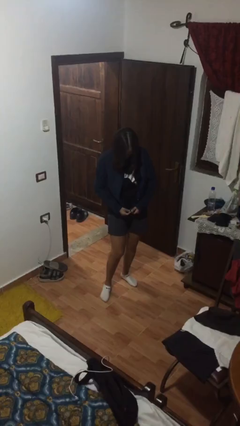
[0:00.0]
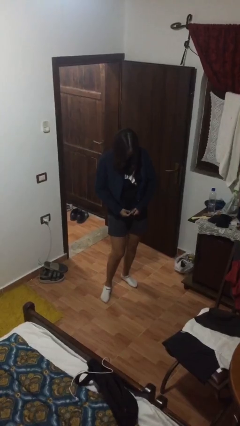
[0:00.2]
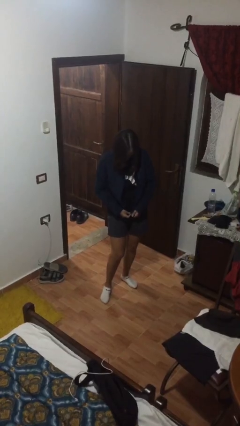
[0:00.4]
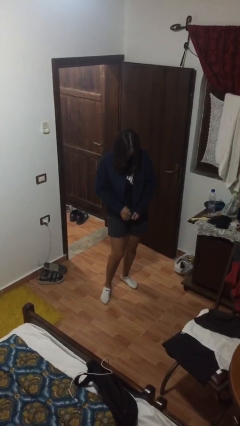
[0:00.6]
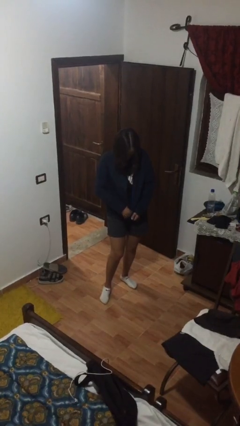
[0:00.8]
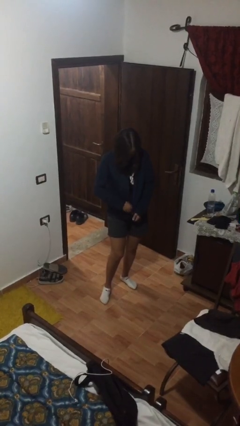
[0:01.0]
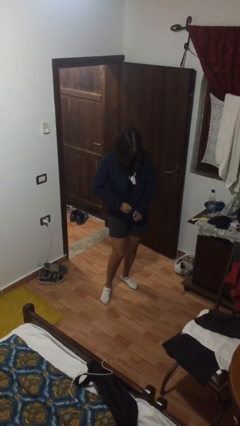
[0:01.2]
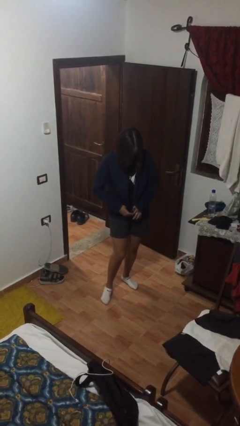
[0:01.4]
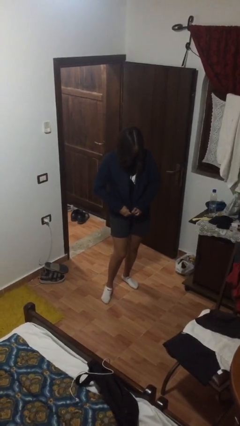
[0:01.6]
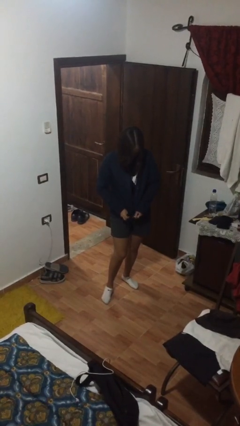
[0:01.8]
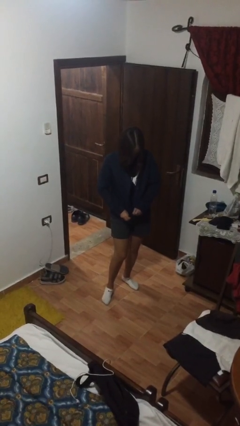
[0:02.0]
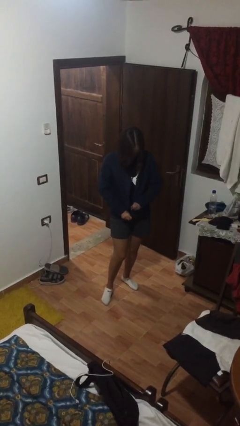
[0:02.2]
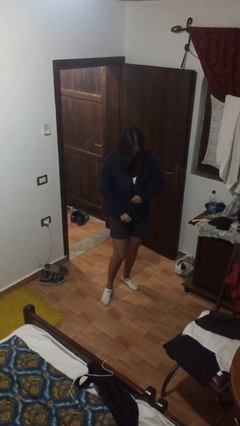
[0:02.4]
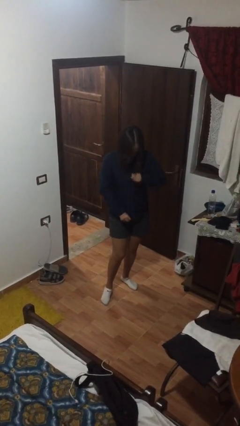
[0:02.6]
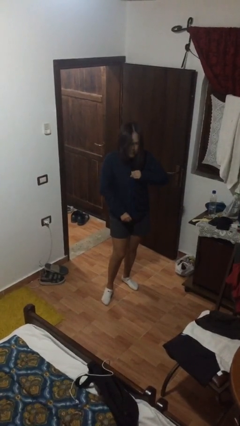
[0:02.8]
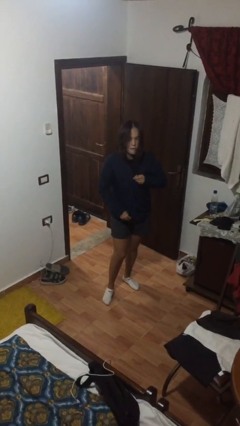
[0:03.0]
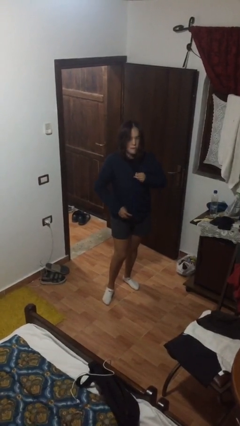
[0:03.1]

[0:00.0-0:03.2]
person zips up jacket

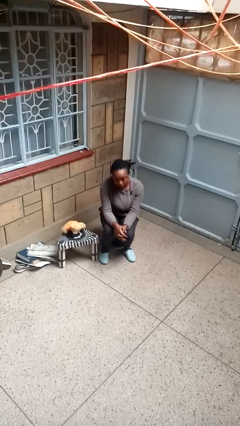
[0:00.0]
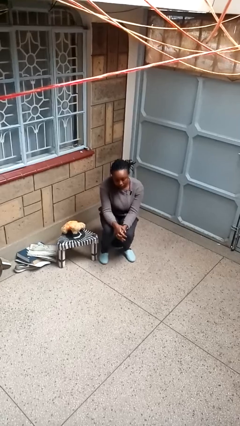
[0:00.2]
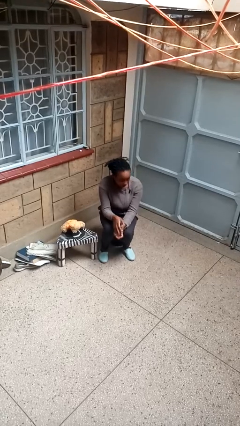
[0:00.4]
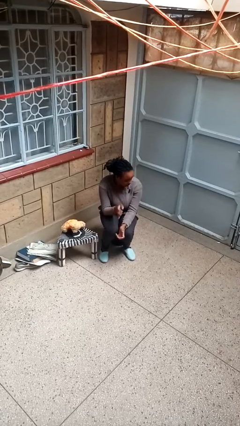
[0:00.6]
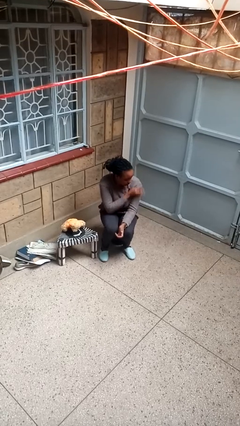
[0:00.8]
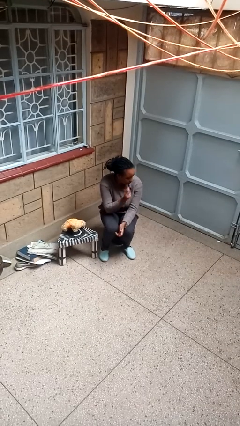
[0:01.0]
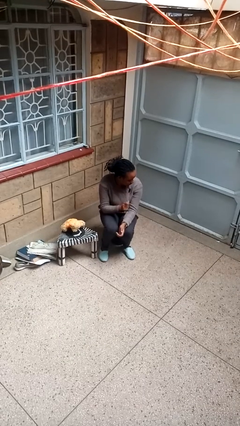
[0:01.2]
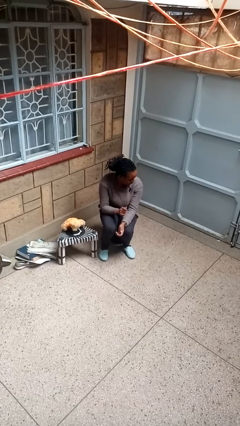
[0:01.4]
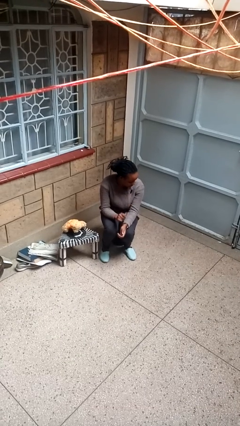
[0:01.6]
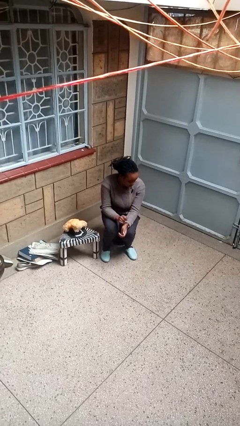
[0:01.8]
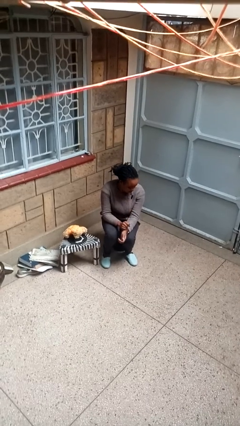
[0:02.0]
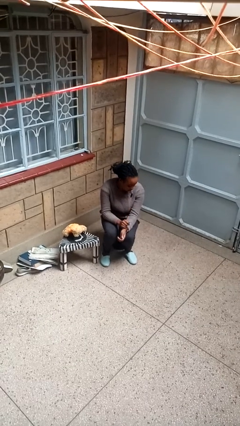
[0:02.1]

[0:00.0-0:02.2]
person swats bug

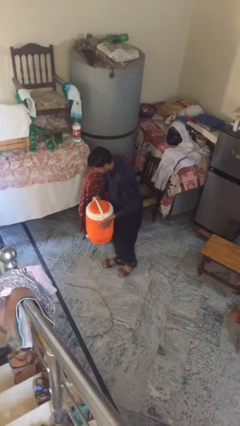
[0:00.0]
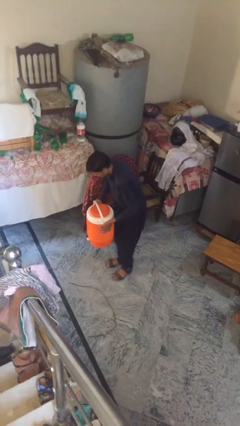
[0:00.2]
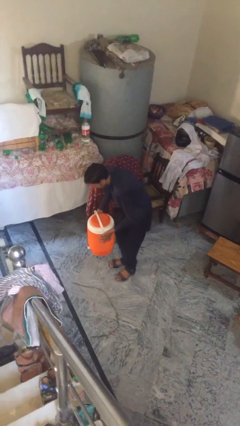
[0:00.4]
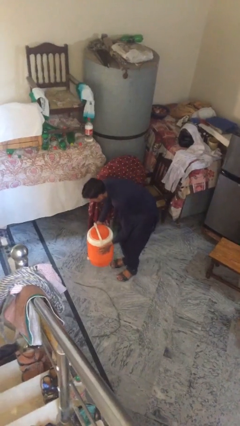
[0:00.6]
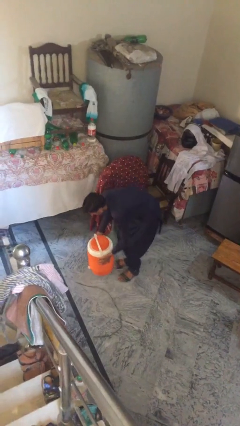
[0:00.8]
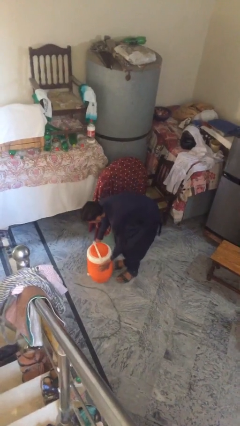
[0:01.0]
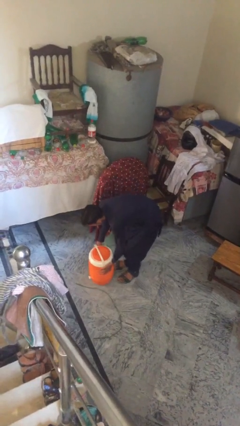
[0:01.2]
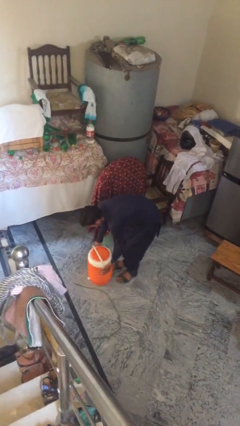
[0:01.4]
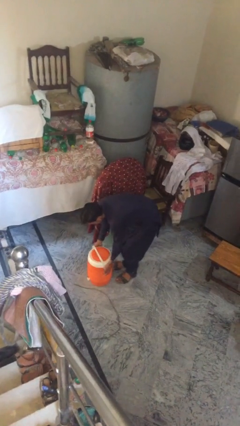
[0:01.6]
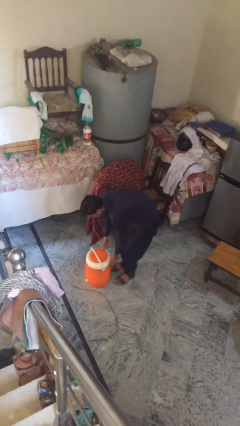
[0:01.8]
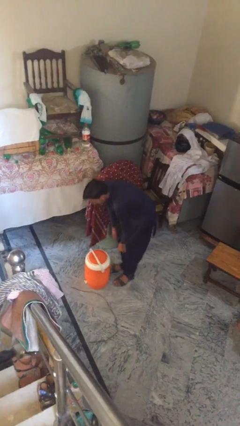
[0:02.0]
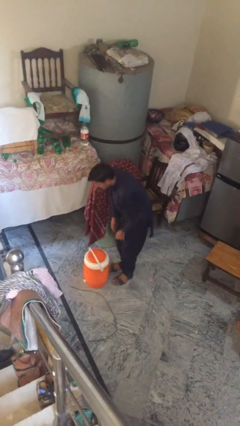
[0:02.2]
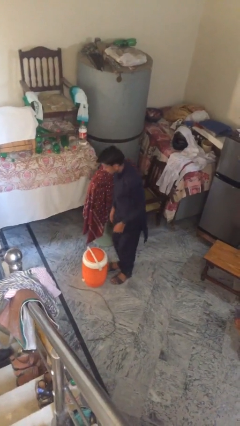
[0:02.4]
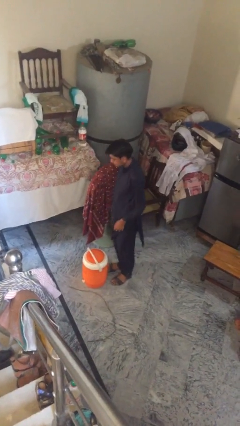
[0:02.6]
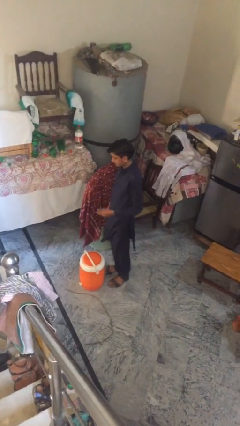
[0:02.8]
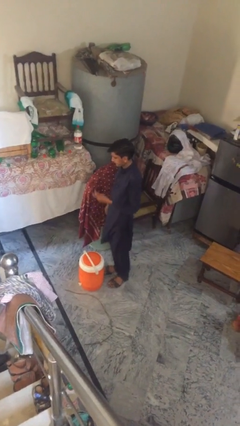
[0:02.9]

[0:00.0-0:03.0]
person puts down object on floor

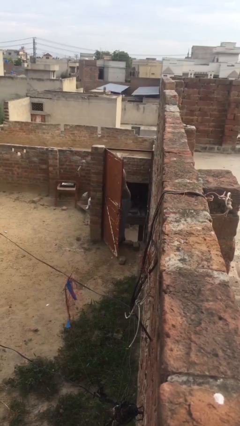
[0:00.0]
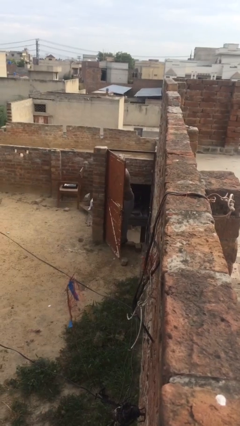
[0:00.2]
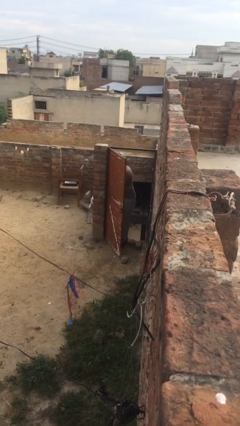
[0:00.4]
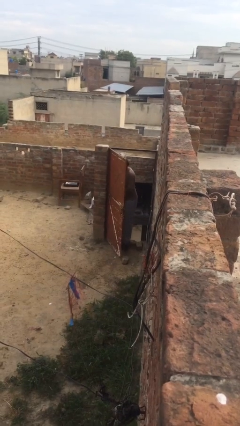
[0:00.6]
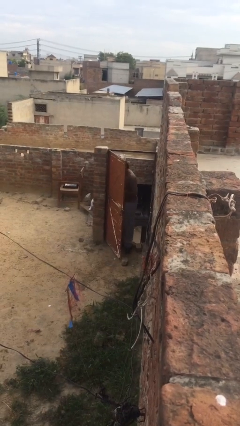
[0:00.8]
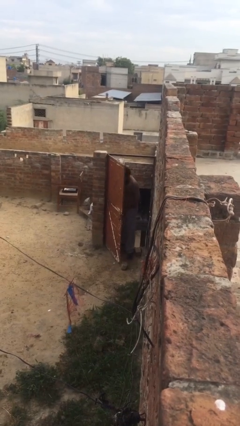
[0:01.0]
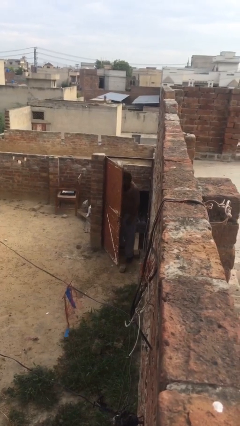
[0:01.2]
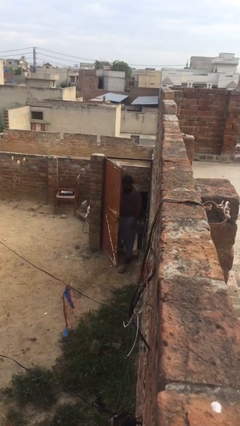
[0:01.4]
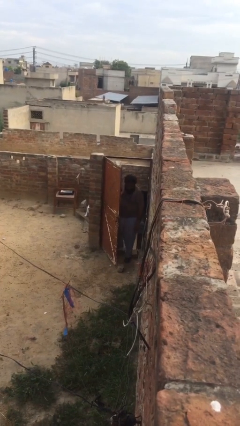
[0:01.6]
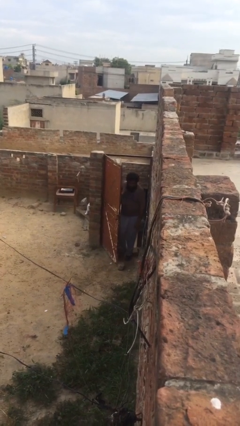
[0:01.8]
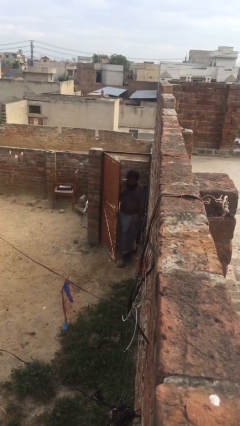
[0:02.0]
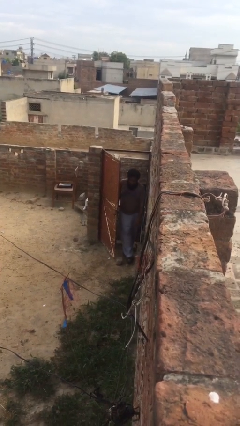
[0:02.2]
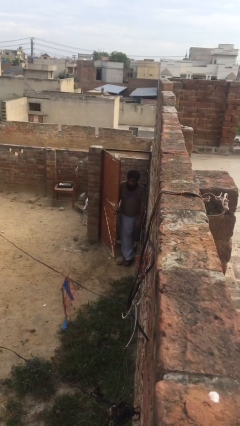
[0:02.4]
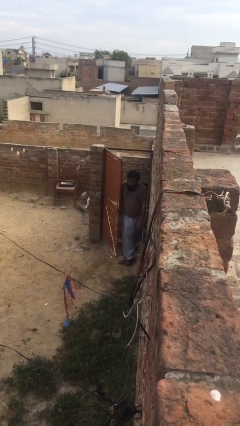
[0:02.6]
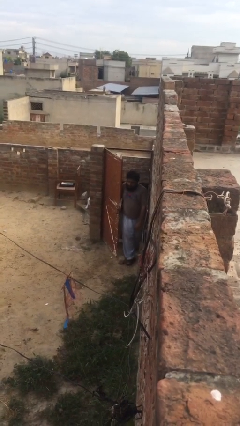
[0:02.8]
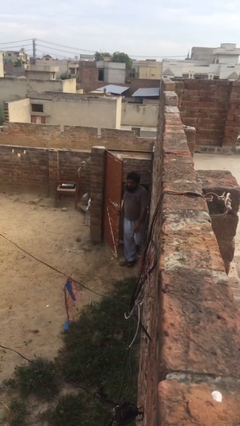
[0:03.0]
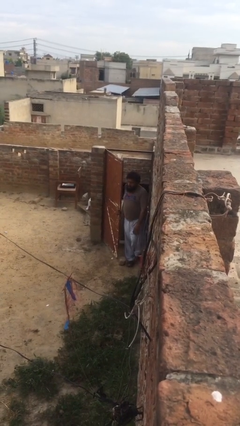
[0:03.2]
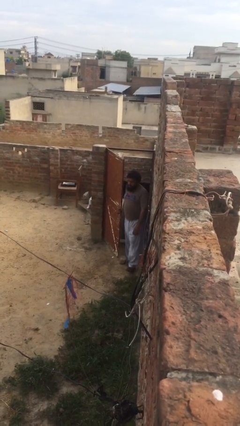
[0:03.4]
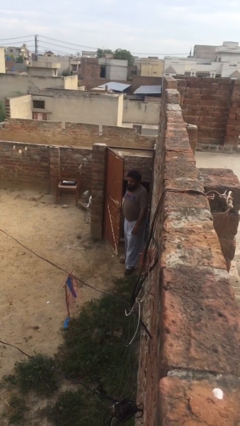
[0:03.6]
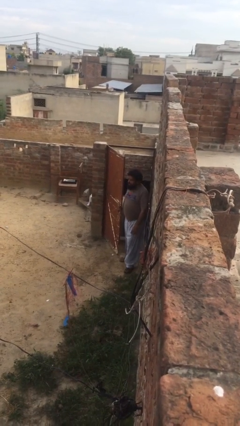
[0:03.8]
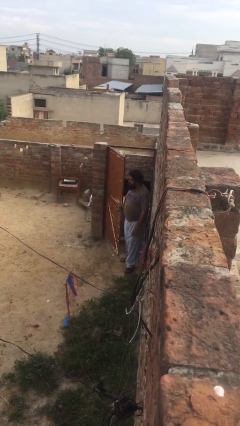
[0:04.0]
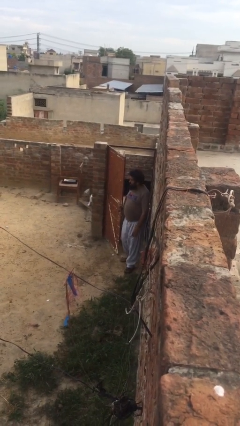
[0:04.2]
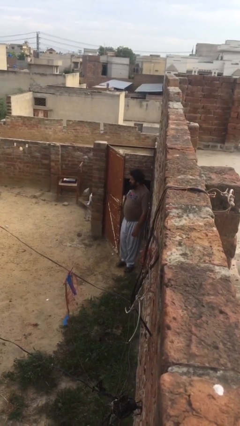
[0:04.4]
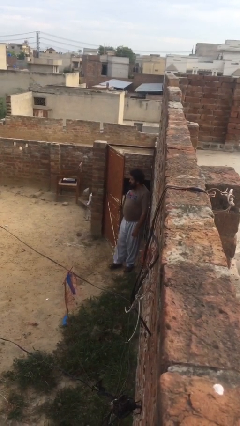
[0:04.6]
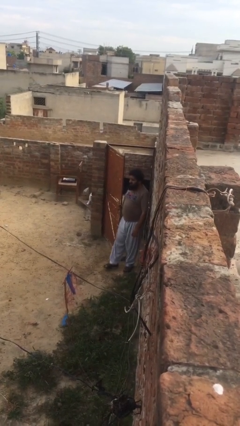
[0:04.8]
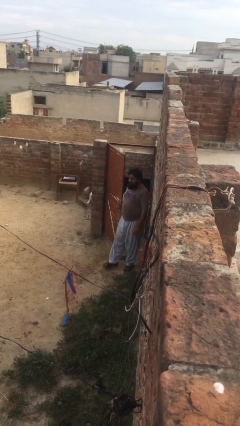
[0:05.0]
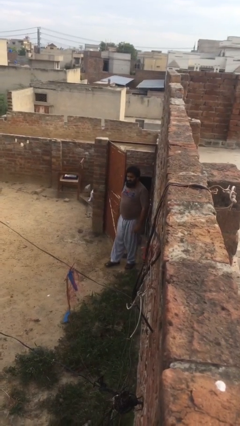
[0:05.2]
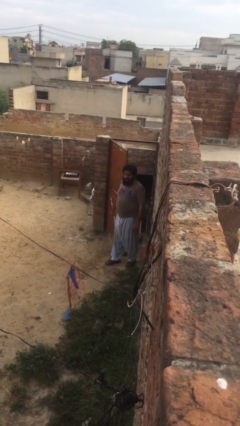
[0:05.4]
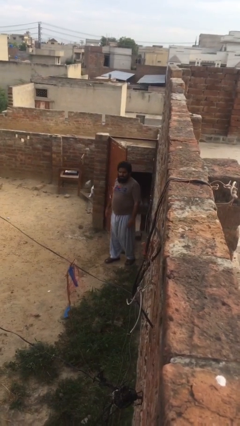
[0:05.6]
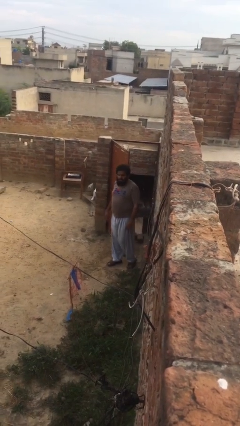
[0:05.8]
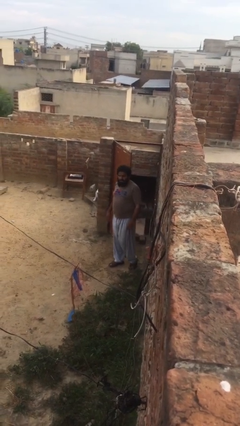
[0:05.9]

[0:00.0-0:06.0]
person enters scene through structure

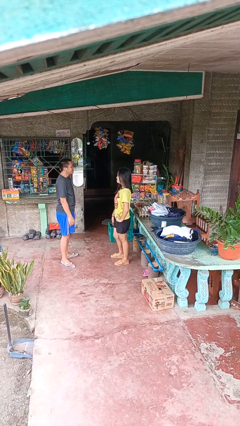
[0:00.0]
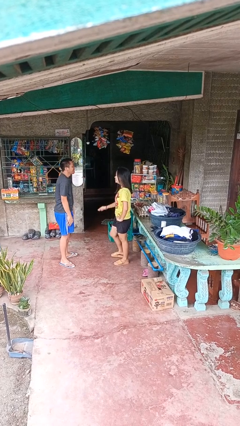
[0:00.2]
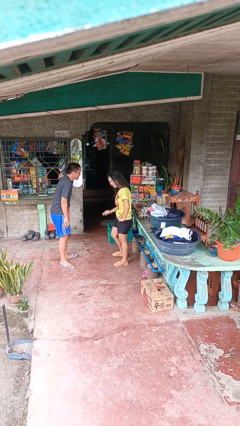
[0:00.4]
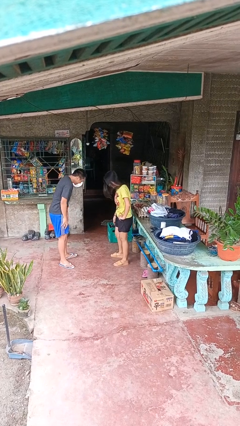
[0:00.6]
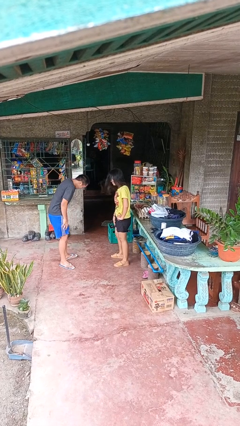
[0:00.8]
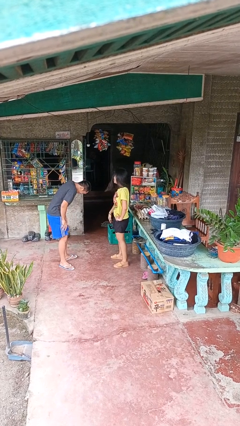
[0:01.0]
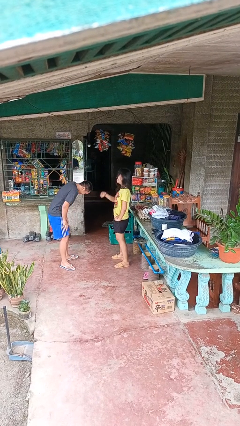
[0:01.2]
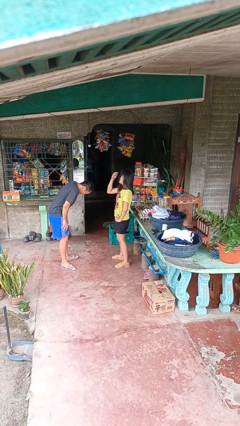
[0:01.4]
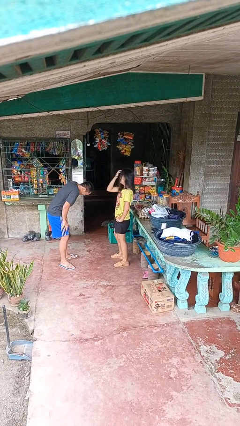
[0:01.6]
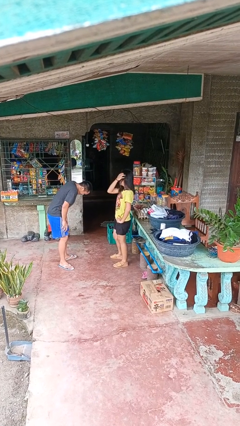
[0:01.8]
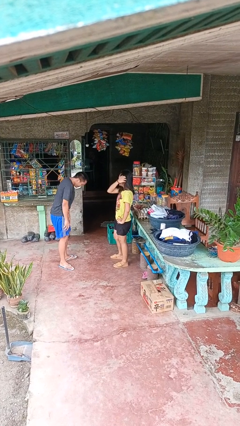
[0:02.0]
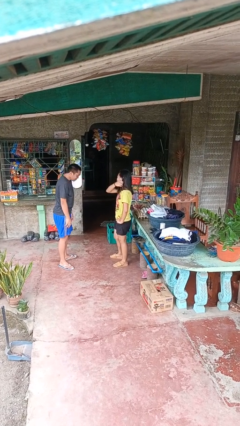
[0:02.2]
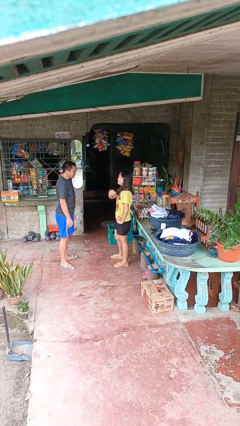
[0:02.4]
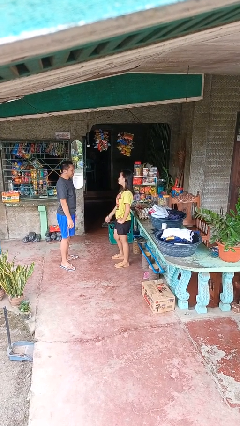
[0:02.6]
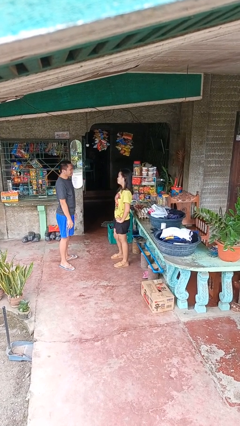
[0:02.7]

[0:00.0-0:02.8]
person laughs with person

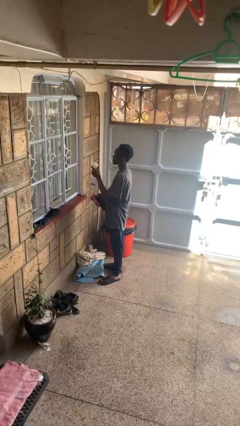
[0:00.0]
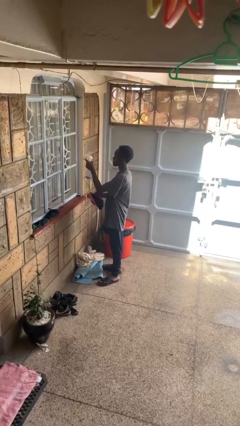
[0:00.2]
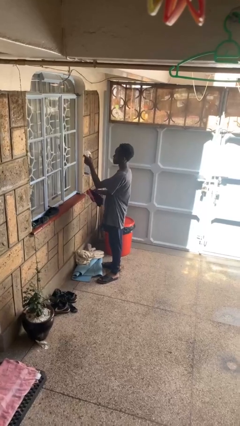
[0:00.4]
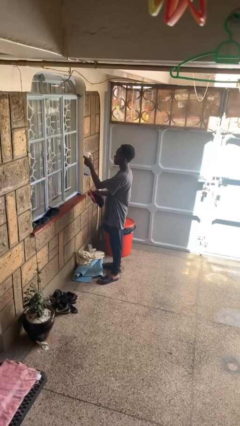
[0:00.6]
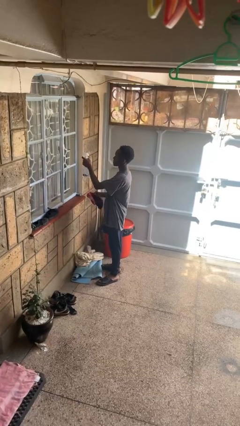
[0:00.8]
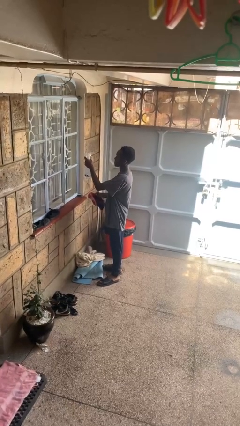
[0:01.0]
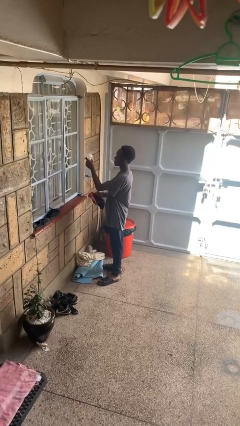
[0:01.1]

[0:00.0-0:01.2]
person sprays from bottle
